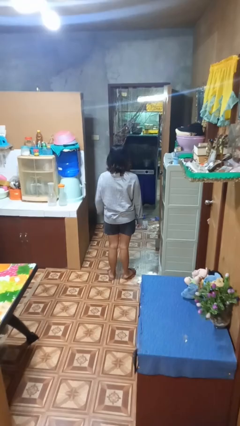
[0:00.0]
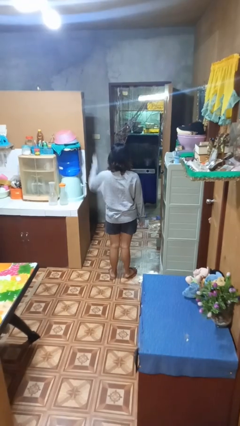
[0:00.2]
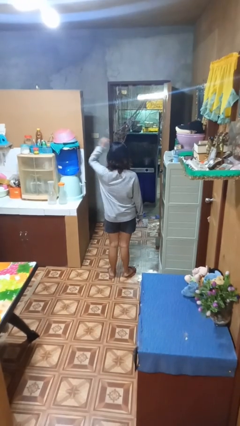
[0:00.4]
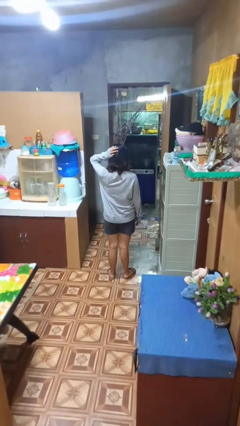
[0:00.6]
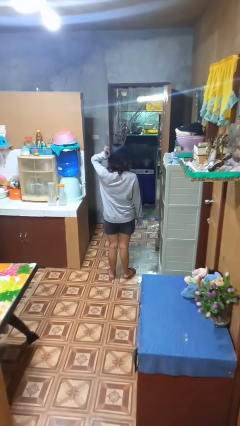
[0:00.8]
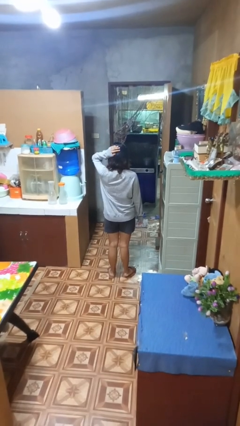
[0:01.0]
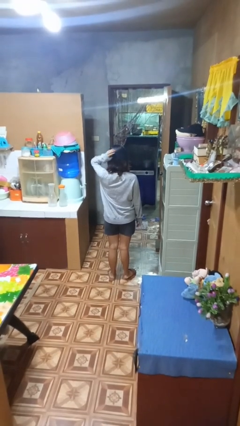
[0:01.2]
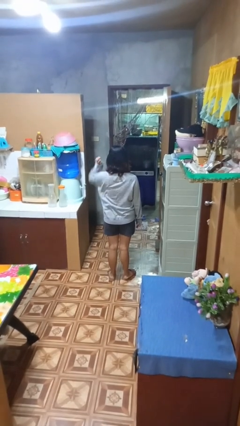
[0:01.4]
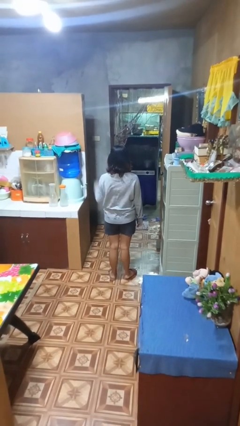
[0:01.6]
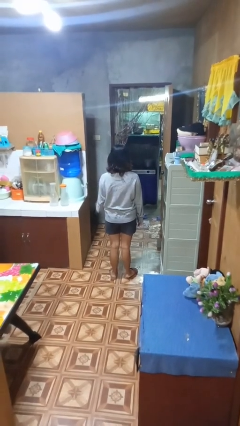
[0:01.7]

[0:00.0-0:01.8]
person pats head

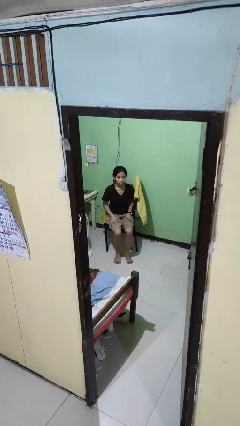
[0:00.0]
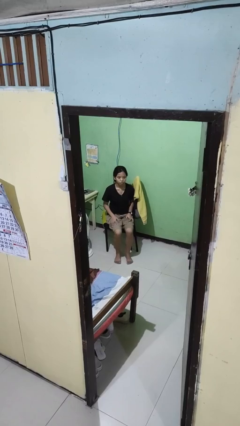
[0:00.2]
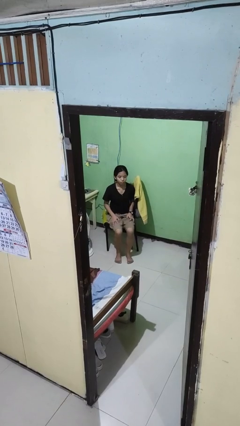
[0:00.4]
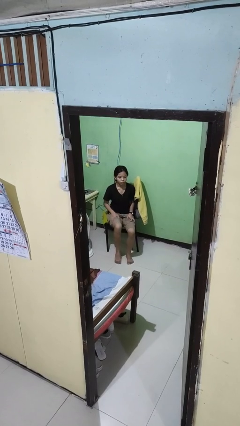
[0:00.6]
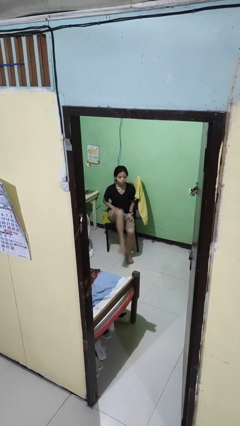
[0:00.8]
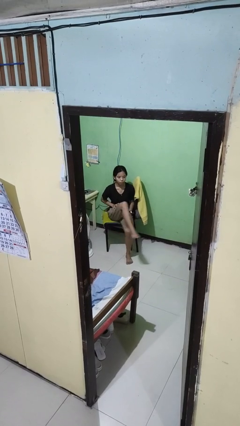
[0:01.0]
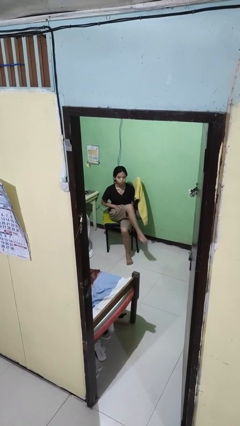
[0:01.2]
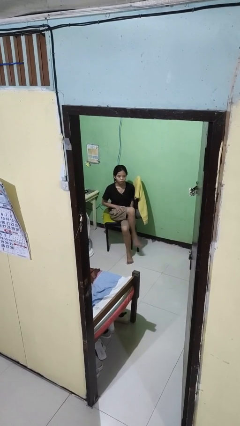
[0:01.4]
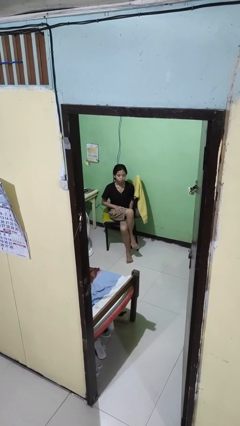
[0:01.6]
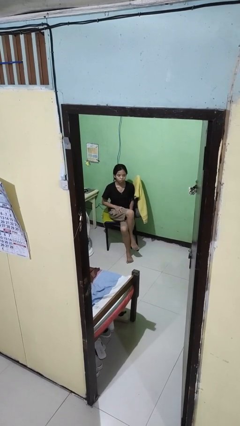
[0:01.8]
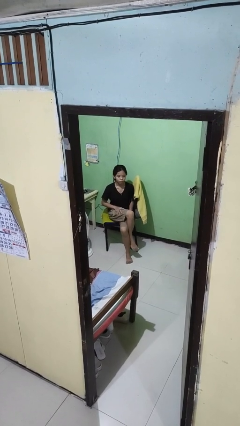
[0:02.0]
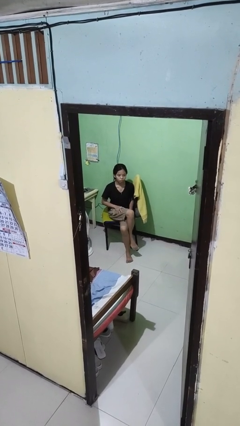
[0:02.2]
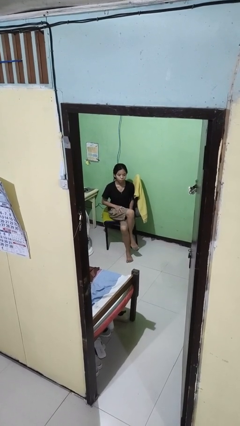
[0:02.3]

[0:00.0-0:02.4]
person crosses legs

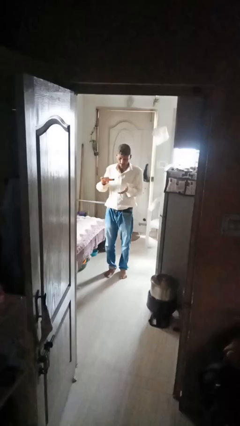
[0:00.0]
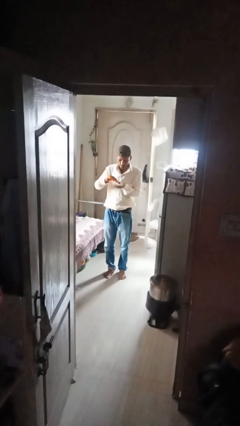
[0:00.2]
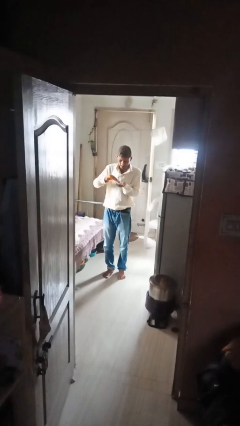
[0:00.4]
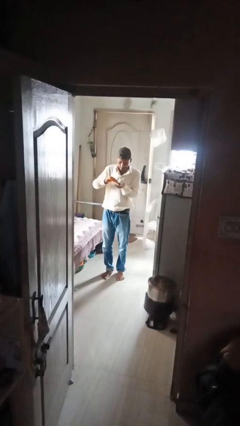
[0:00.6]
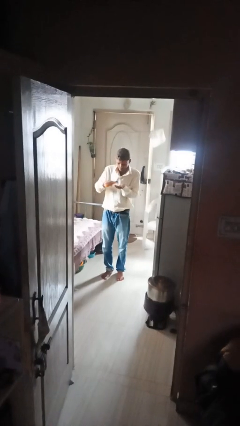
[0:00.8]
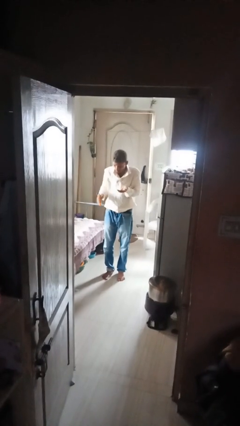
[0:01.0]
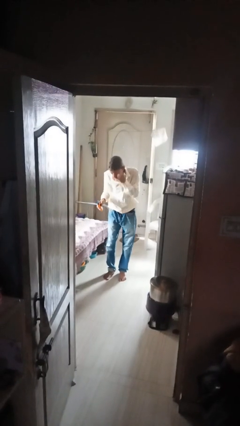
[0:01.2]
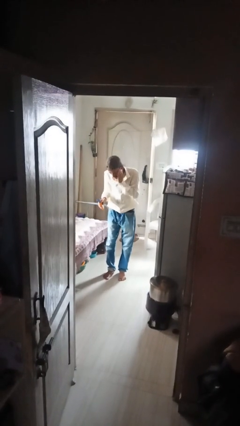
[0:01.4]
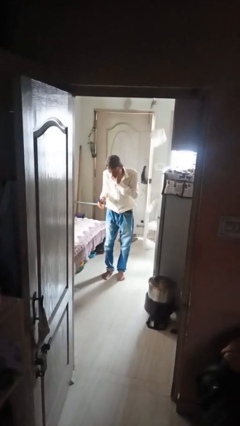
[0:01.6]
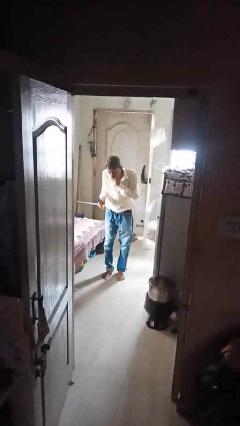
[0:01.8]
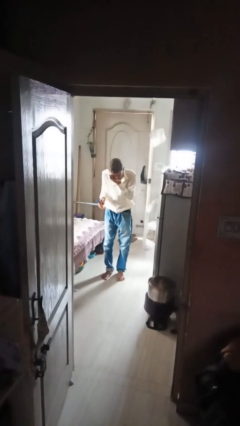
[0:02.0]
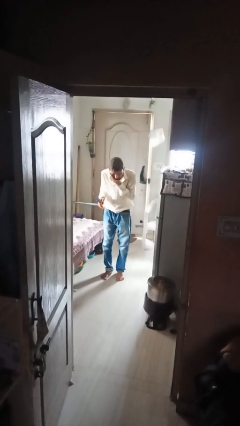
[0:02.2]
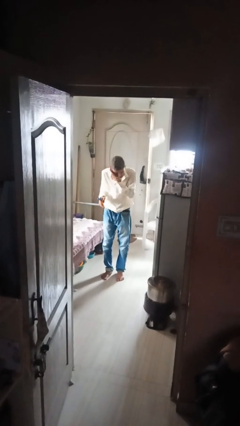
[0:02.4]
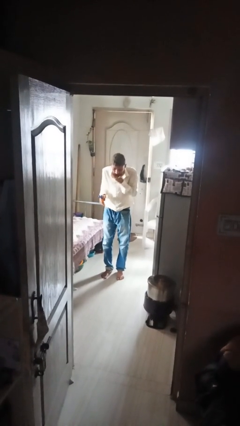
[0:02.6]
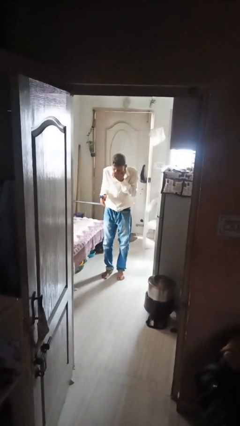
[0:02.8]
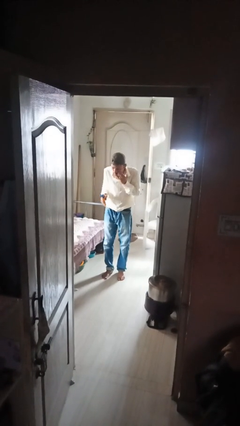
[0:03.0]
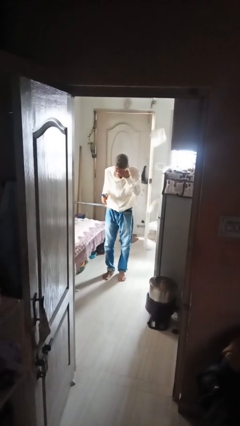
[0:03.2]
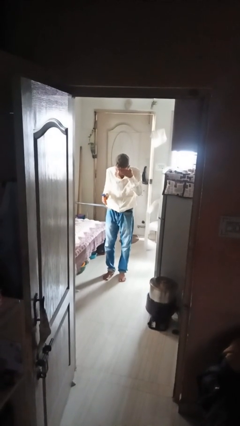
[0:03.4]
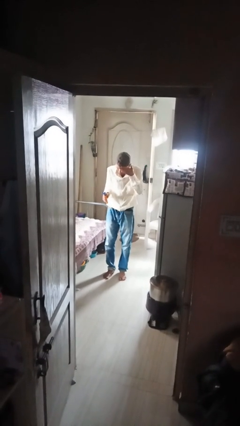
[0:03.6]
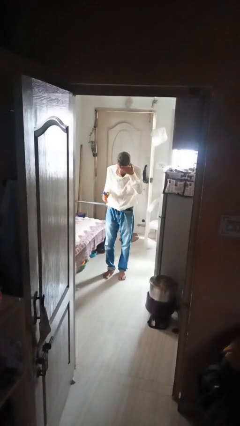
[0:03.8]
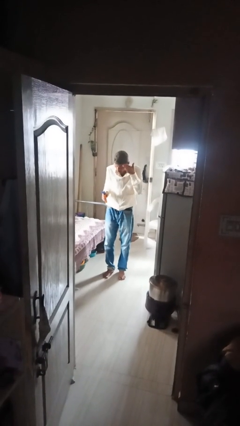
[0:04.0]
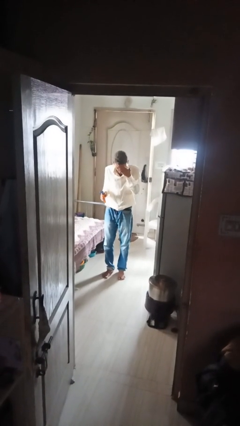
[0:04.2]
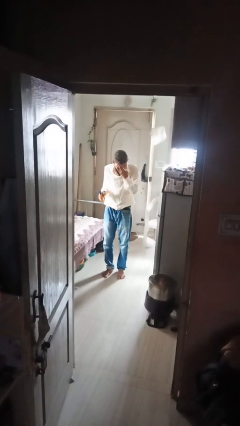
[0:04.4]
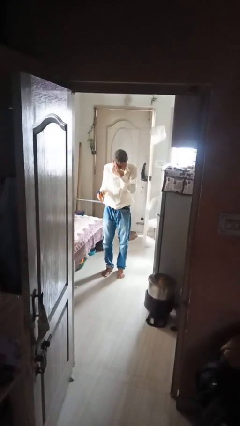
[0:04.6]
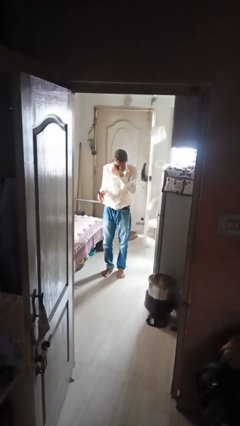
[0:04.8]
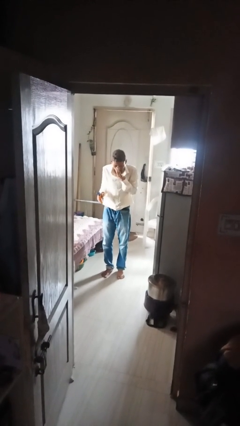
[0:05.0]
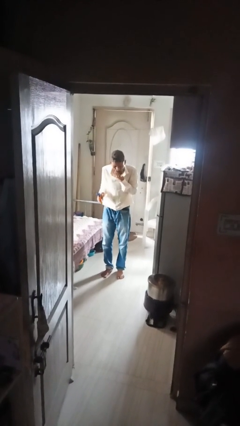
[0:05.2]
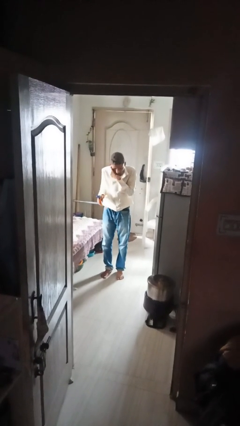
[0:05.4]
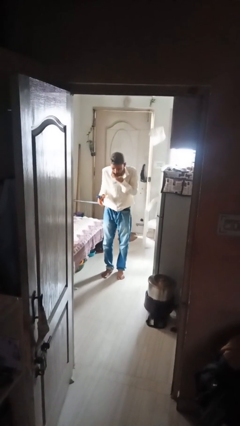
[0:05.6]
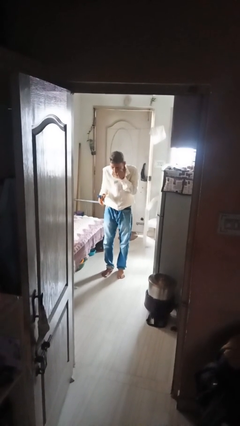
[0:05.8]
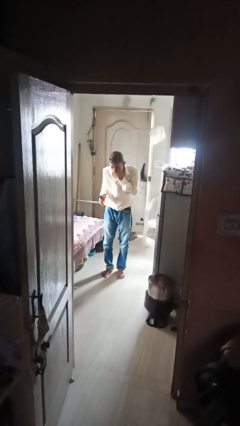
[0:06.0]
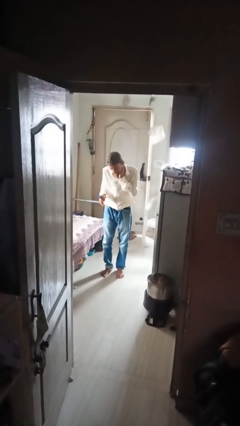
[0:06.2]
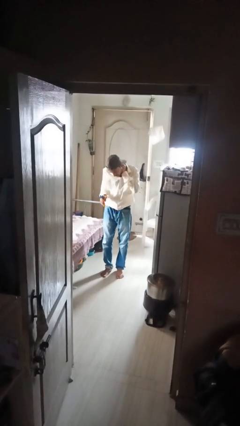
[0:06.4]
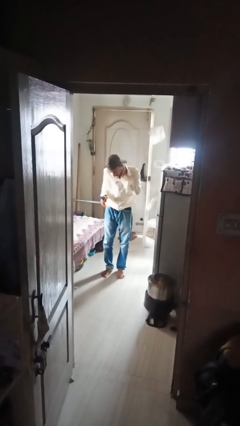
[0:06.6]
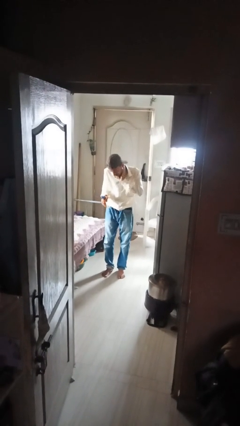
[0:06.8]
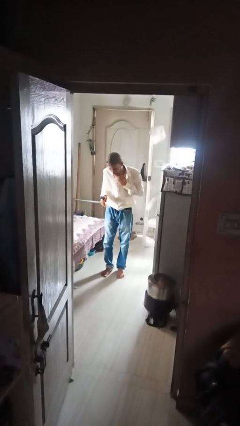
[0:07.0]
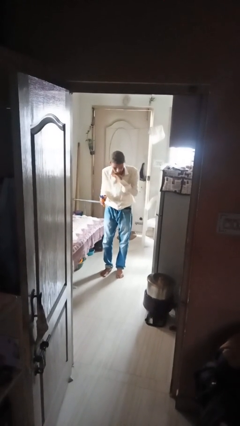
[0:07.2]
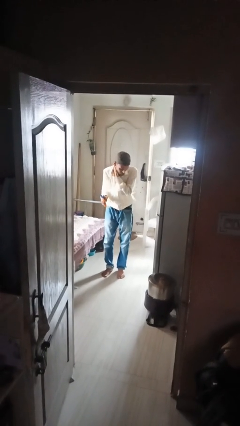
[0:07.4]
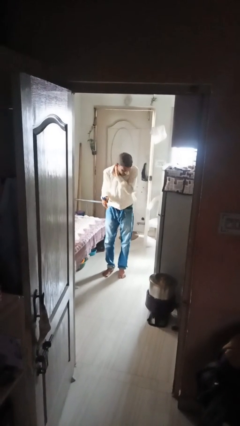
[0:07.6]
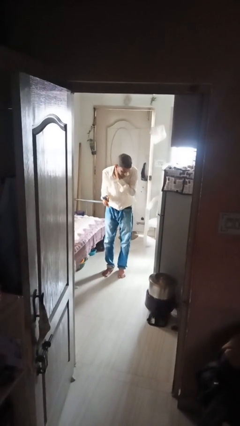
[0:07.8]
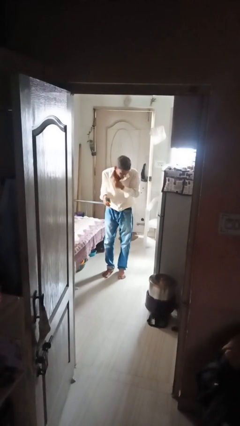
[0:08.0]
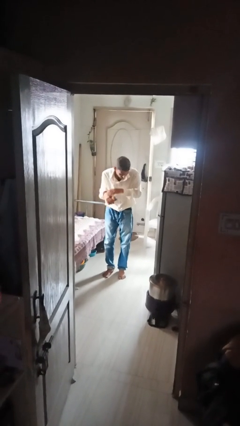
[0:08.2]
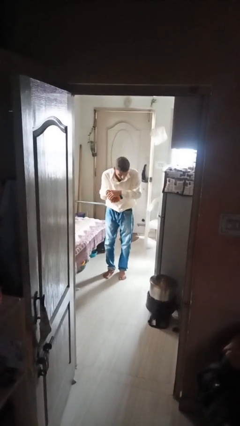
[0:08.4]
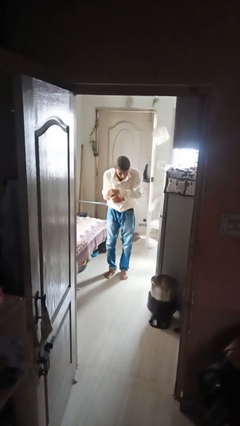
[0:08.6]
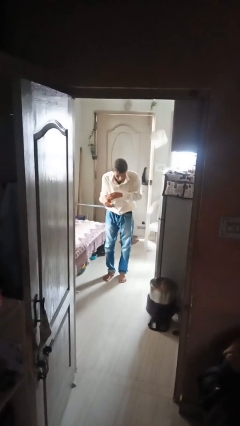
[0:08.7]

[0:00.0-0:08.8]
person applies sunscreen

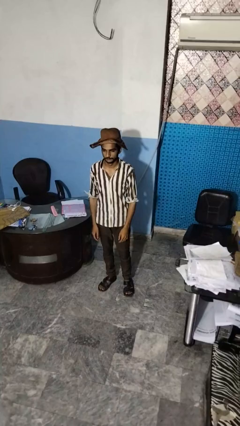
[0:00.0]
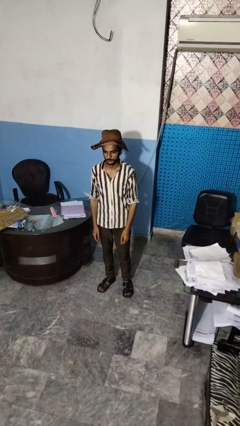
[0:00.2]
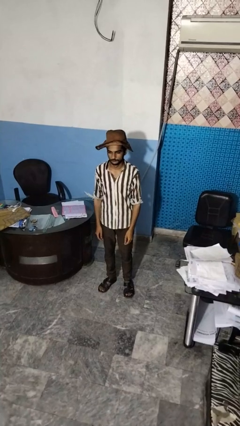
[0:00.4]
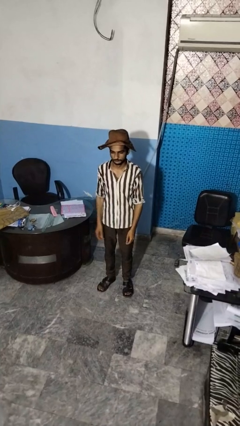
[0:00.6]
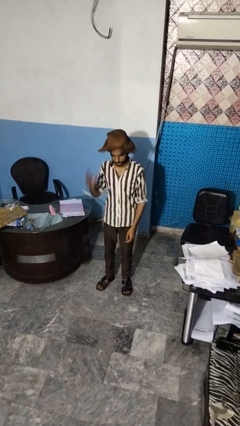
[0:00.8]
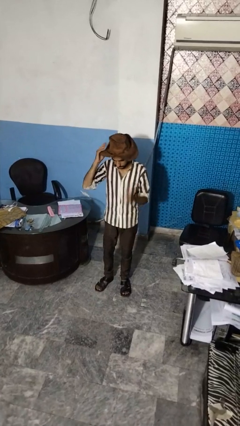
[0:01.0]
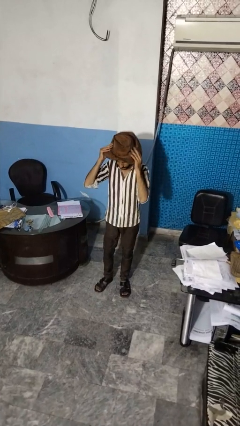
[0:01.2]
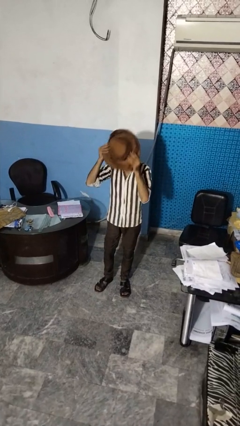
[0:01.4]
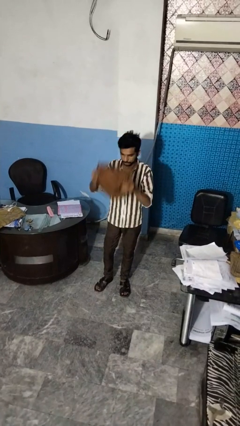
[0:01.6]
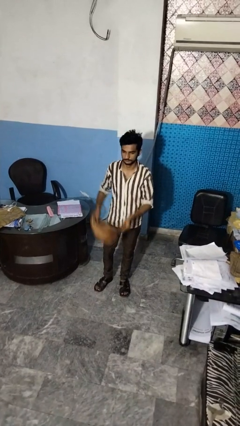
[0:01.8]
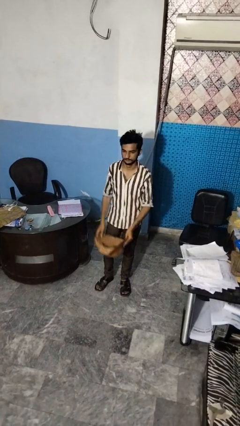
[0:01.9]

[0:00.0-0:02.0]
person takes off hat

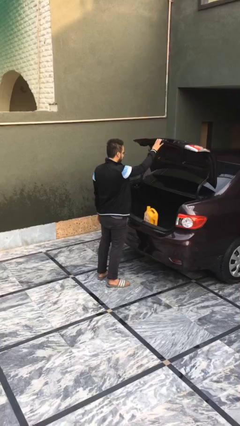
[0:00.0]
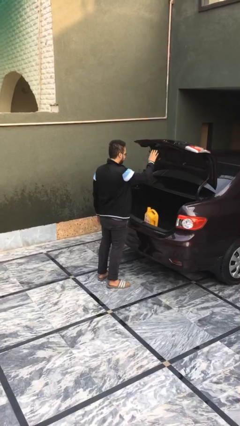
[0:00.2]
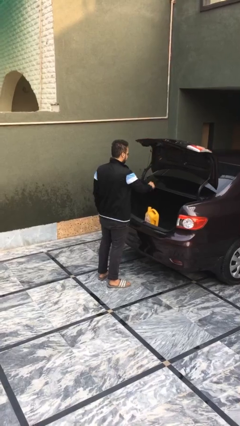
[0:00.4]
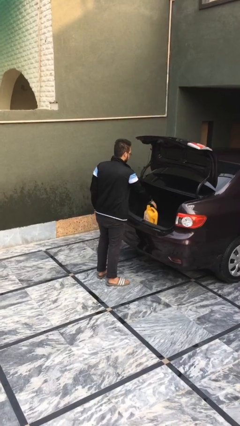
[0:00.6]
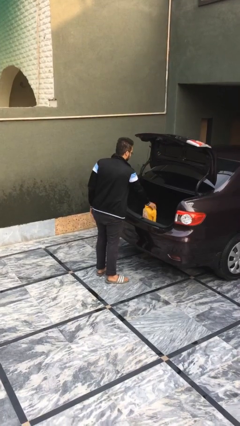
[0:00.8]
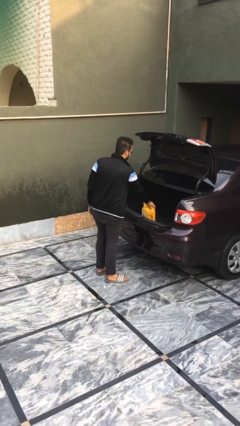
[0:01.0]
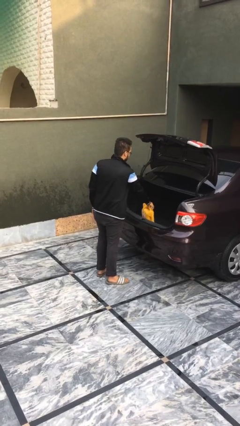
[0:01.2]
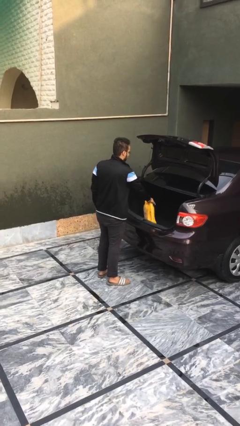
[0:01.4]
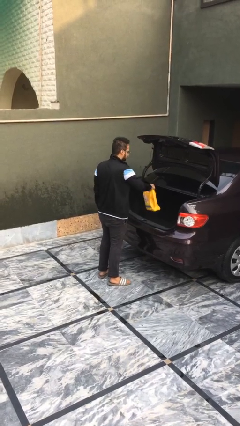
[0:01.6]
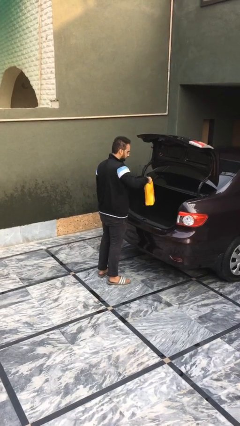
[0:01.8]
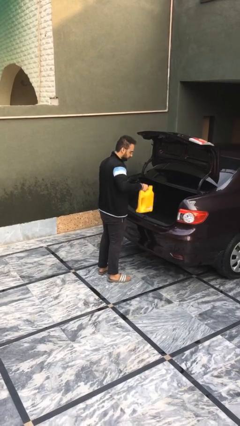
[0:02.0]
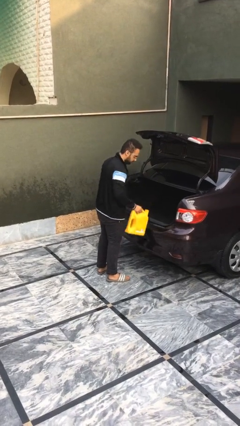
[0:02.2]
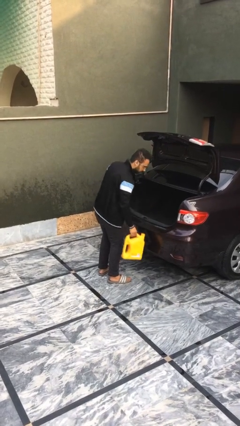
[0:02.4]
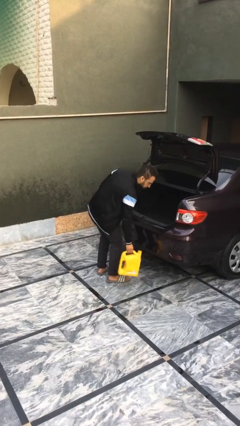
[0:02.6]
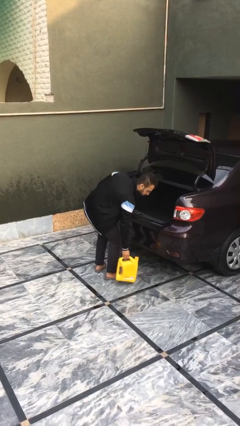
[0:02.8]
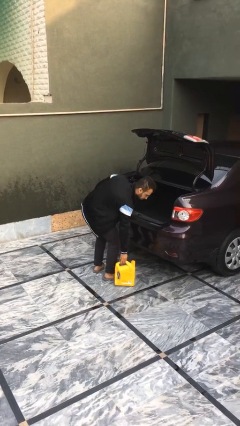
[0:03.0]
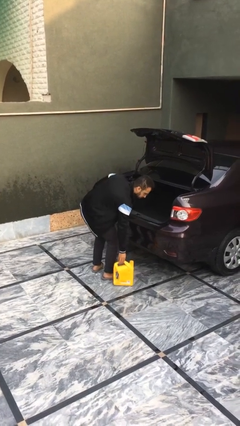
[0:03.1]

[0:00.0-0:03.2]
person unloads car
